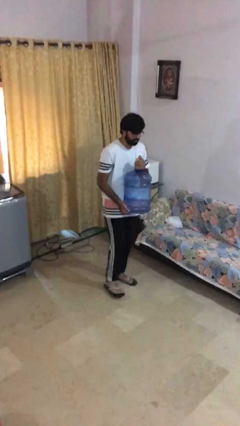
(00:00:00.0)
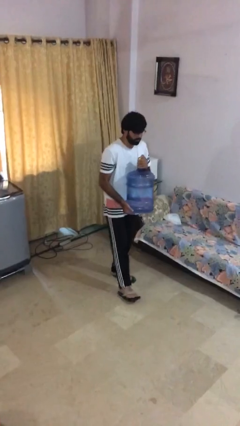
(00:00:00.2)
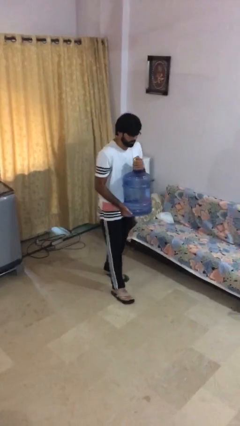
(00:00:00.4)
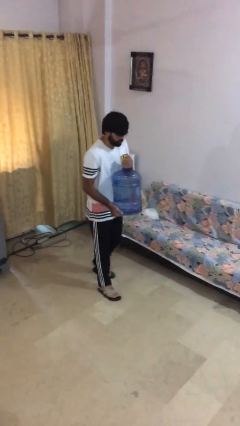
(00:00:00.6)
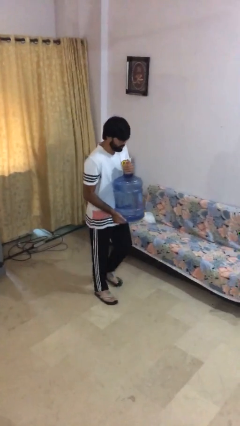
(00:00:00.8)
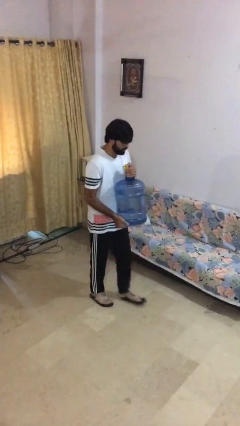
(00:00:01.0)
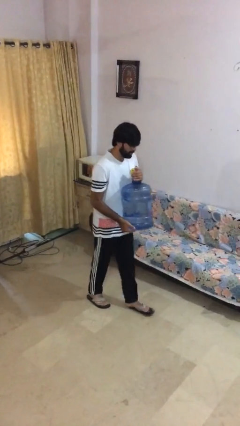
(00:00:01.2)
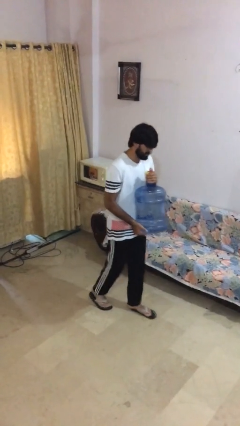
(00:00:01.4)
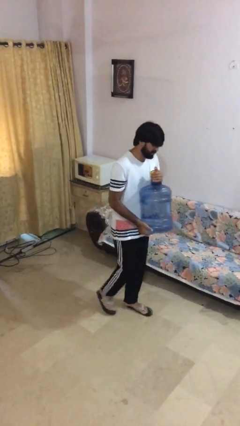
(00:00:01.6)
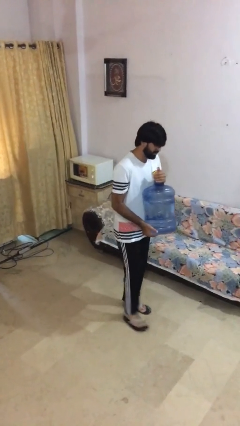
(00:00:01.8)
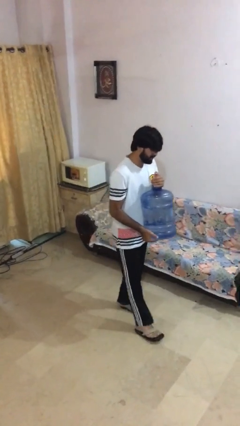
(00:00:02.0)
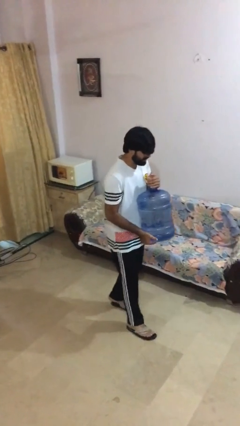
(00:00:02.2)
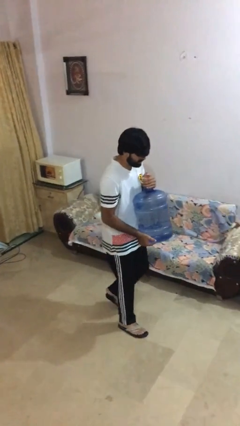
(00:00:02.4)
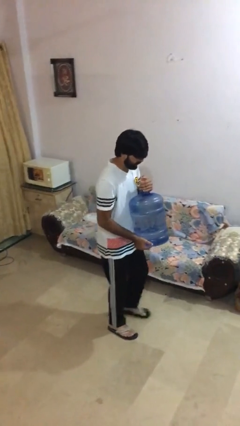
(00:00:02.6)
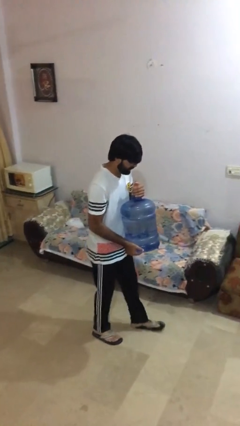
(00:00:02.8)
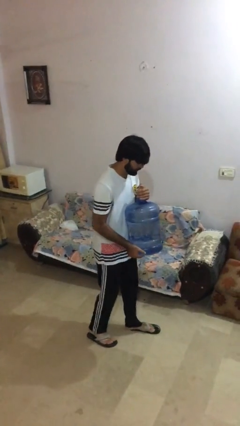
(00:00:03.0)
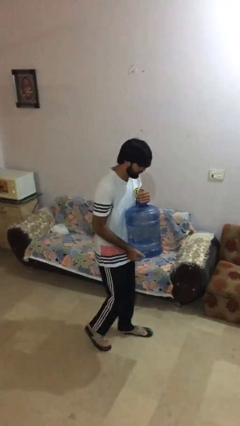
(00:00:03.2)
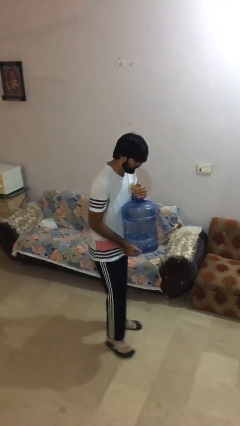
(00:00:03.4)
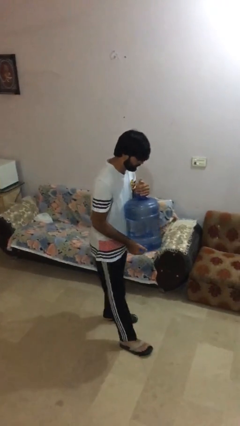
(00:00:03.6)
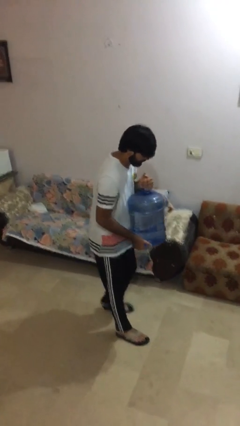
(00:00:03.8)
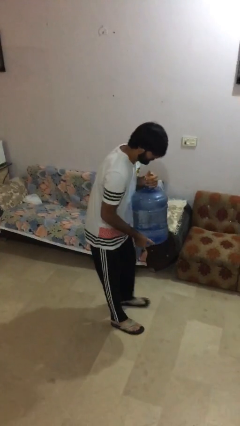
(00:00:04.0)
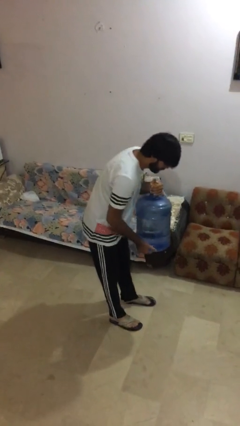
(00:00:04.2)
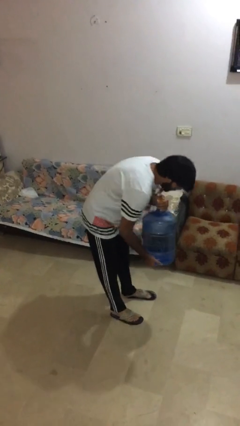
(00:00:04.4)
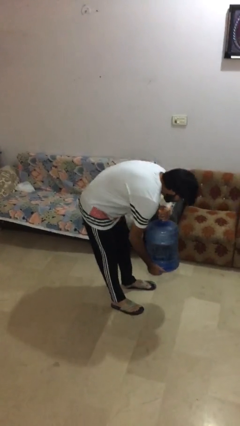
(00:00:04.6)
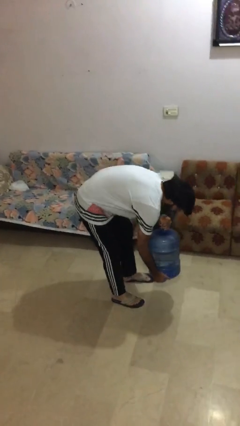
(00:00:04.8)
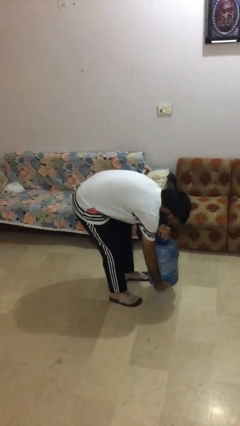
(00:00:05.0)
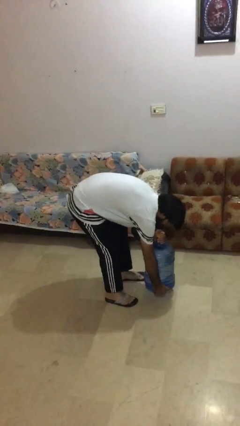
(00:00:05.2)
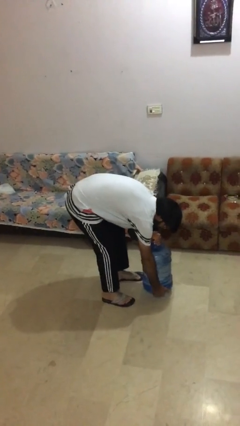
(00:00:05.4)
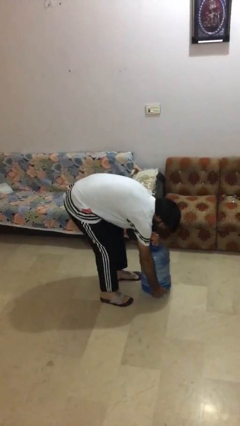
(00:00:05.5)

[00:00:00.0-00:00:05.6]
person carries heavy object

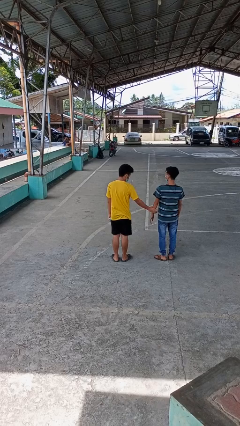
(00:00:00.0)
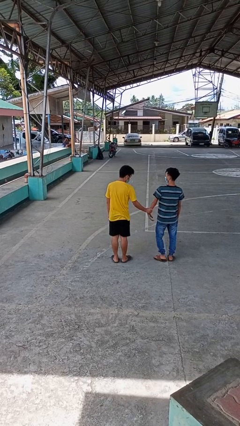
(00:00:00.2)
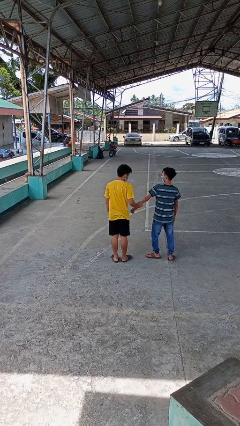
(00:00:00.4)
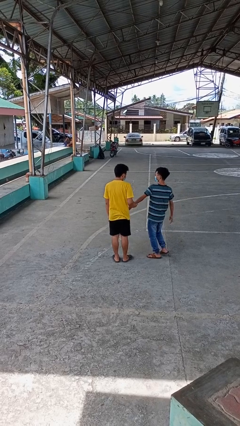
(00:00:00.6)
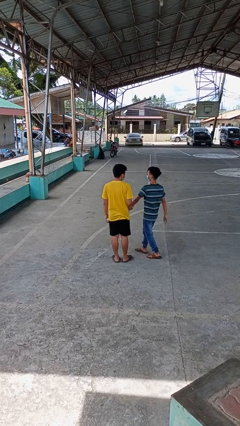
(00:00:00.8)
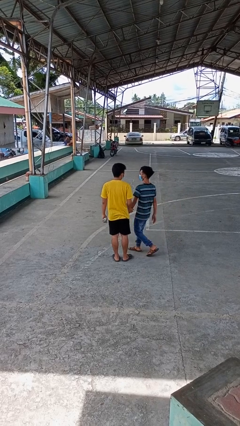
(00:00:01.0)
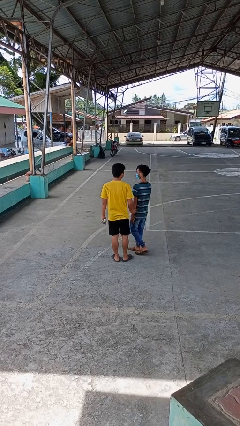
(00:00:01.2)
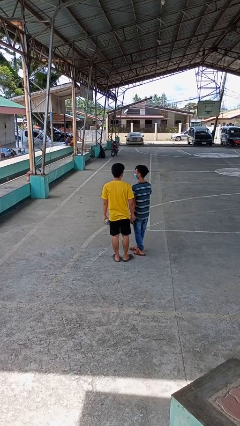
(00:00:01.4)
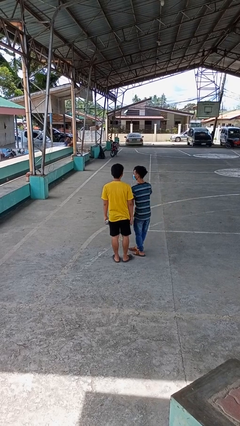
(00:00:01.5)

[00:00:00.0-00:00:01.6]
person grabs person by forearm

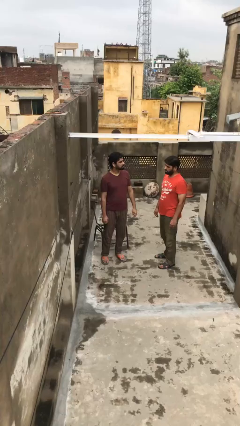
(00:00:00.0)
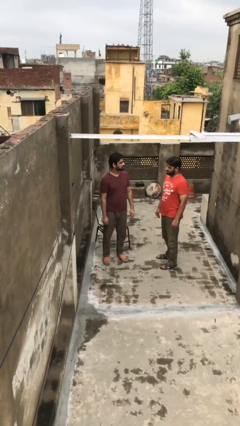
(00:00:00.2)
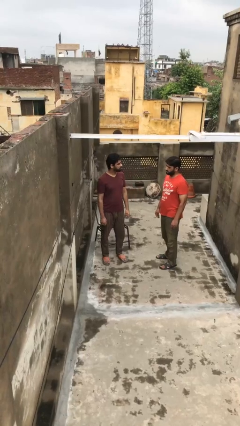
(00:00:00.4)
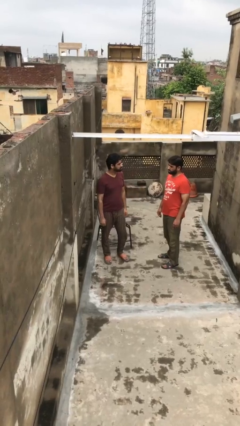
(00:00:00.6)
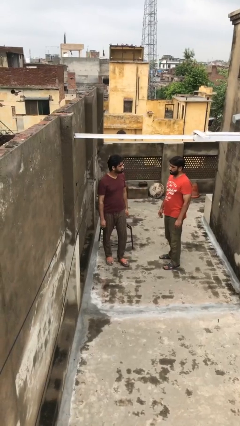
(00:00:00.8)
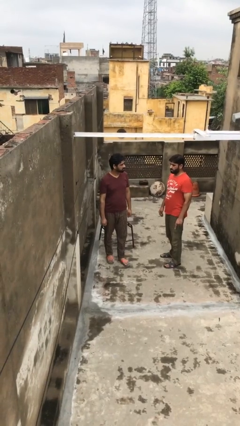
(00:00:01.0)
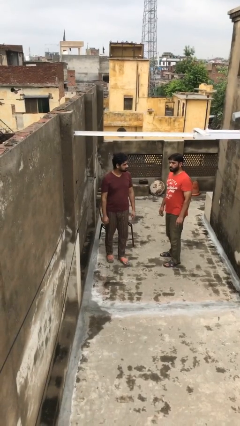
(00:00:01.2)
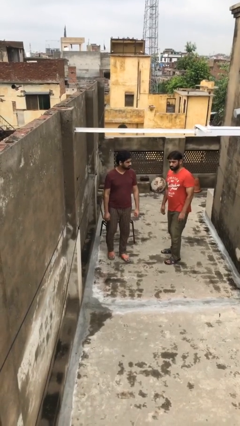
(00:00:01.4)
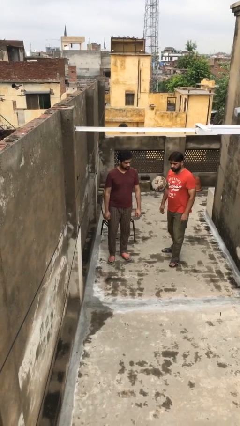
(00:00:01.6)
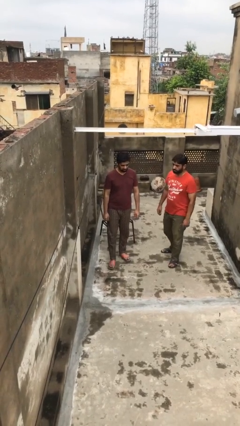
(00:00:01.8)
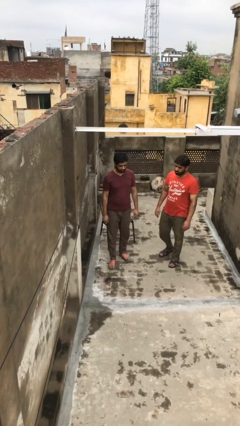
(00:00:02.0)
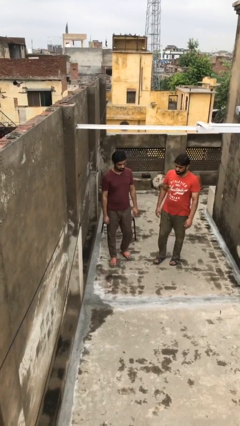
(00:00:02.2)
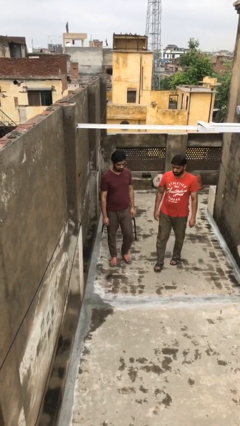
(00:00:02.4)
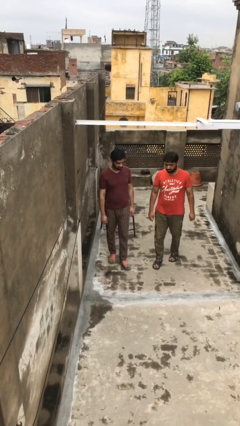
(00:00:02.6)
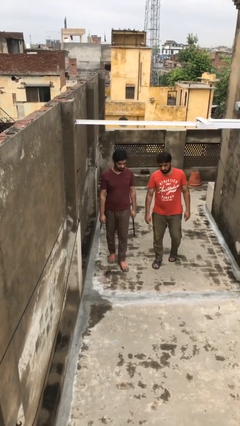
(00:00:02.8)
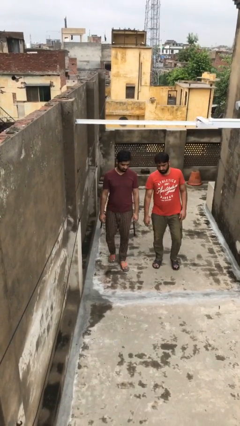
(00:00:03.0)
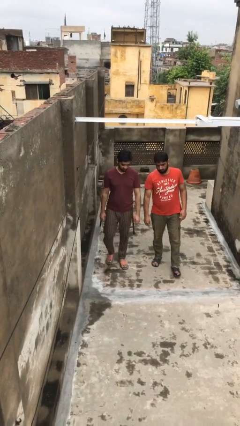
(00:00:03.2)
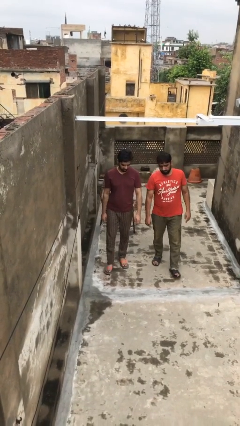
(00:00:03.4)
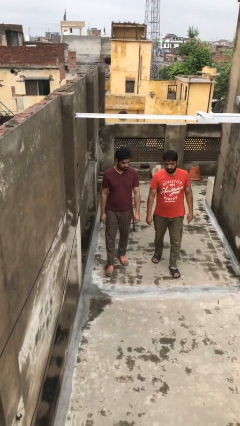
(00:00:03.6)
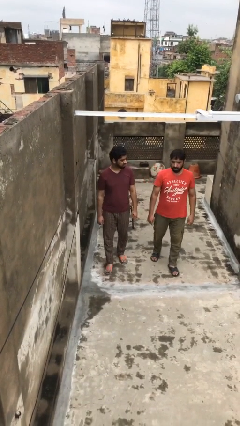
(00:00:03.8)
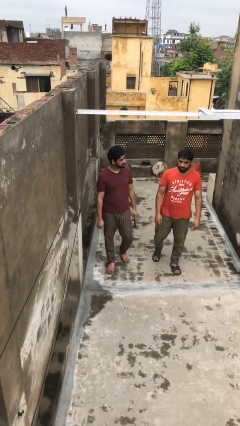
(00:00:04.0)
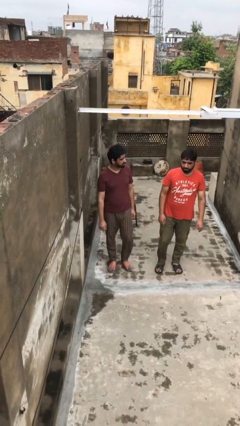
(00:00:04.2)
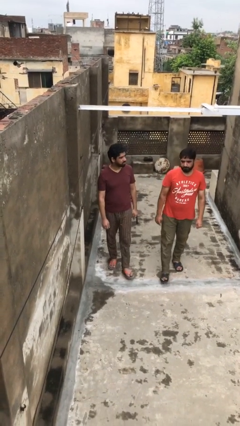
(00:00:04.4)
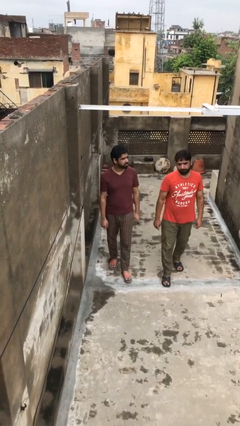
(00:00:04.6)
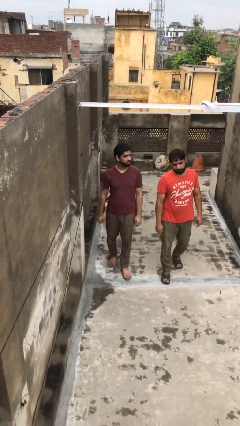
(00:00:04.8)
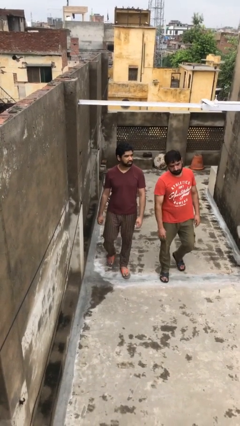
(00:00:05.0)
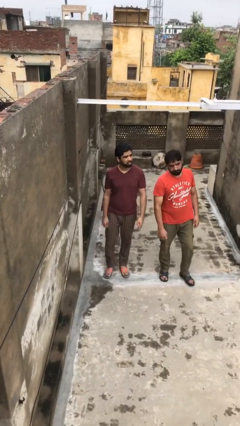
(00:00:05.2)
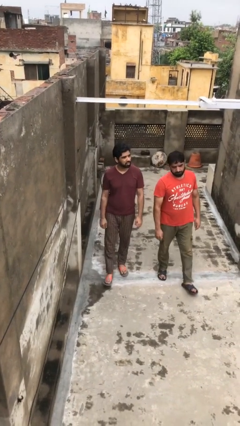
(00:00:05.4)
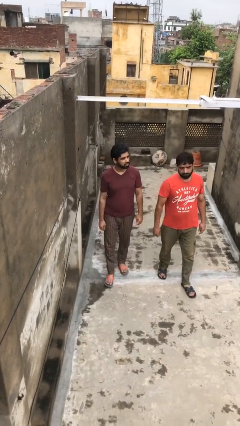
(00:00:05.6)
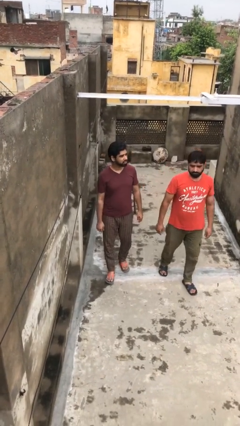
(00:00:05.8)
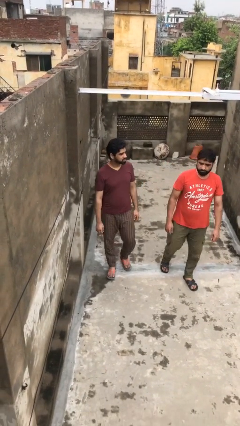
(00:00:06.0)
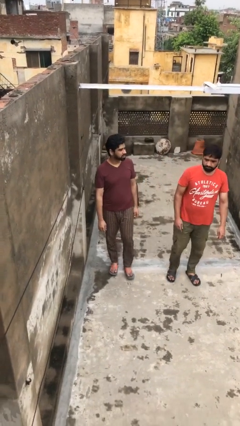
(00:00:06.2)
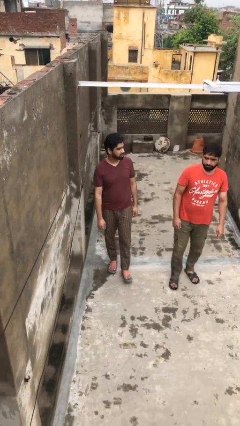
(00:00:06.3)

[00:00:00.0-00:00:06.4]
person talks to person

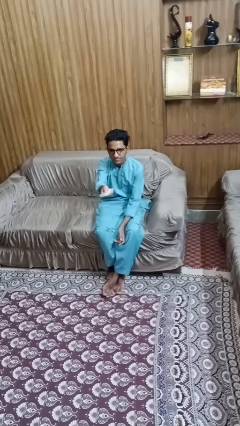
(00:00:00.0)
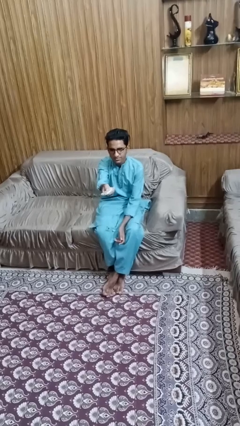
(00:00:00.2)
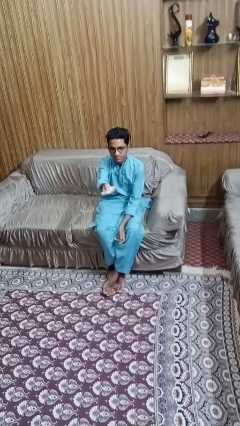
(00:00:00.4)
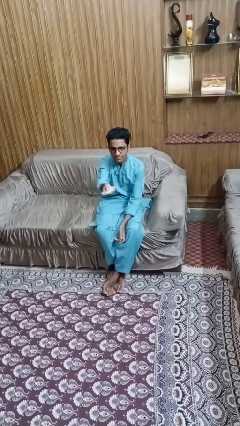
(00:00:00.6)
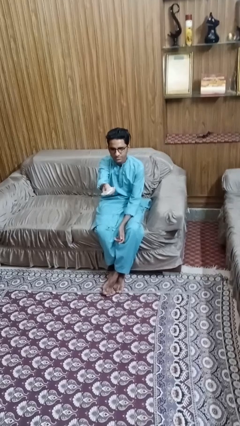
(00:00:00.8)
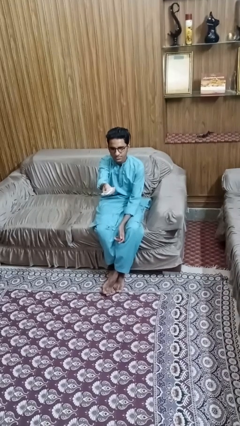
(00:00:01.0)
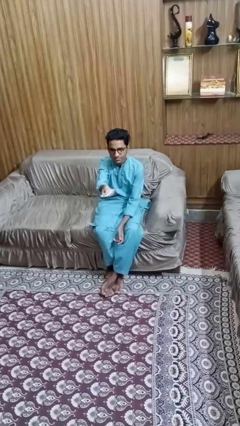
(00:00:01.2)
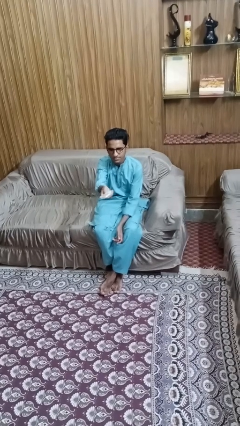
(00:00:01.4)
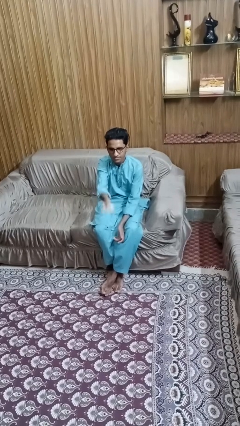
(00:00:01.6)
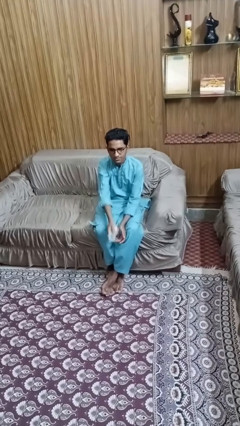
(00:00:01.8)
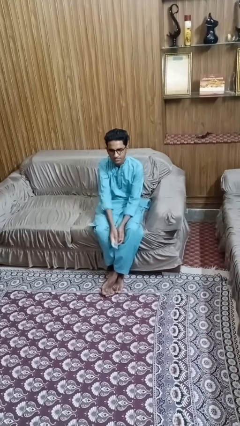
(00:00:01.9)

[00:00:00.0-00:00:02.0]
person uses television remote

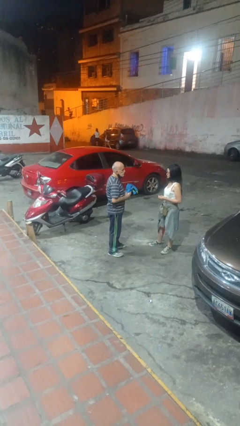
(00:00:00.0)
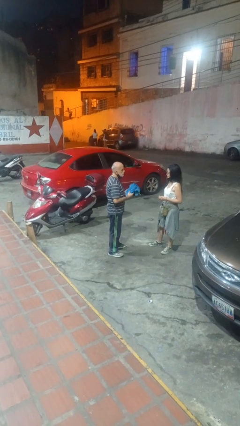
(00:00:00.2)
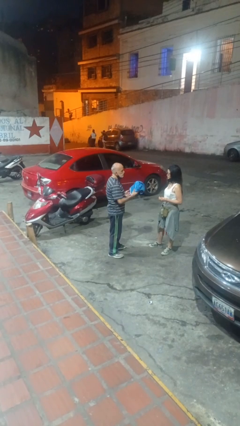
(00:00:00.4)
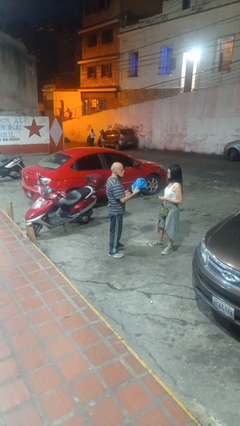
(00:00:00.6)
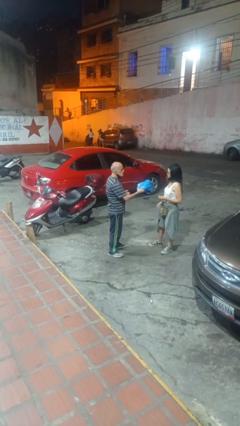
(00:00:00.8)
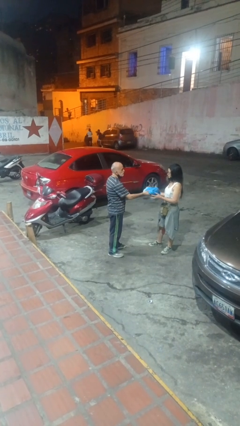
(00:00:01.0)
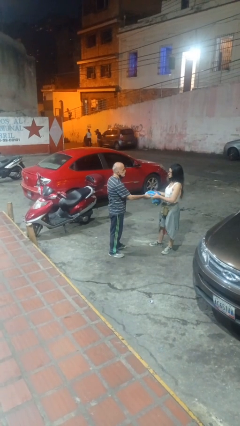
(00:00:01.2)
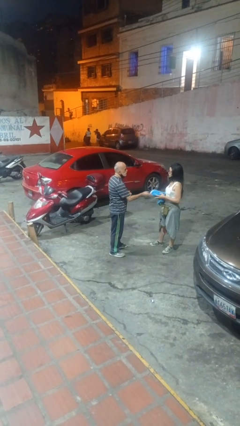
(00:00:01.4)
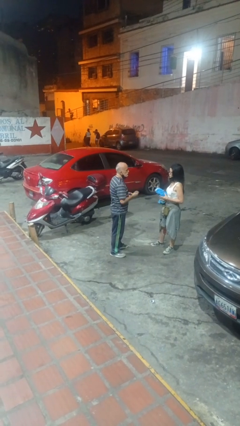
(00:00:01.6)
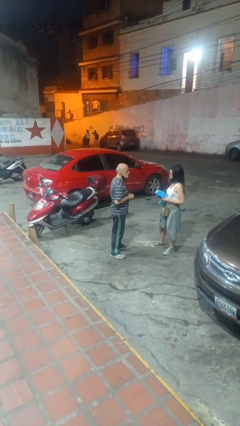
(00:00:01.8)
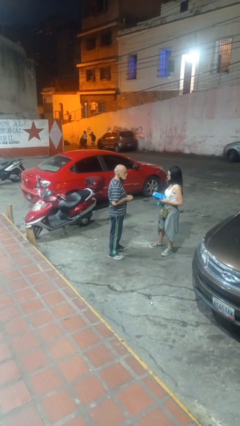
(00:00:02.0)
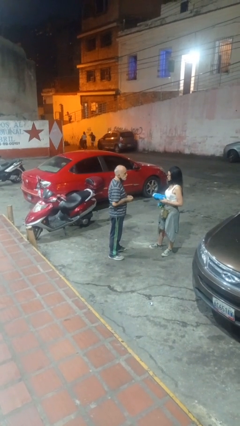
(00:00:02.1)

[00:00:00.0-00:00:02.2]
person transfers object to person
